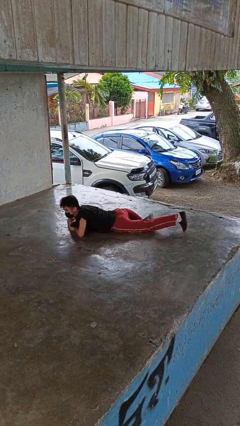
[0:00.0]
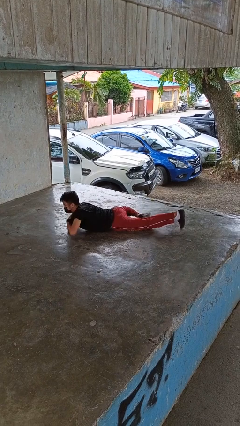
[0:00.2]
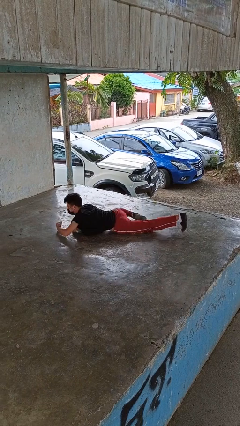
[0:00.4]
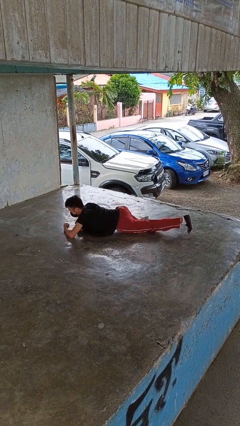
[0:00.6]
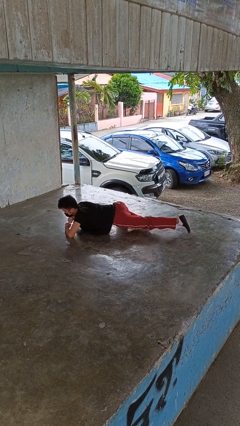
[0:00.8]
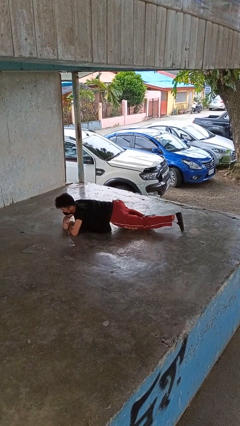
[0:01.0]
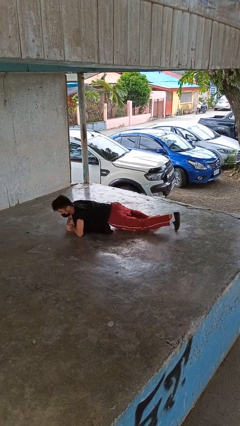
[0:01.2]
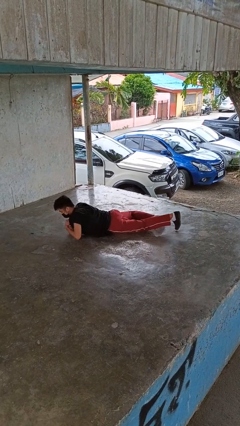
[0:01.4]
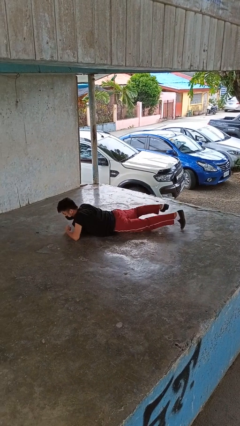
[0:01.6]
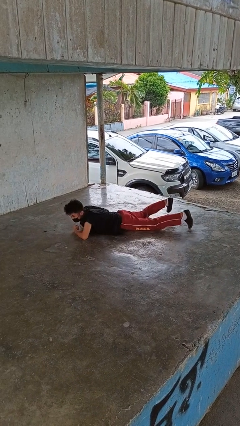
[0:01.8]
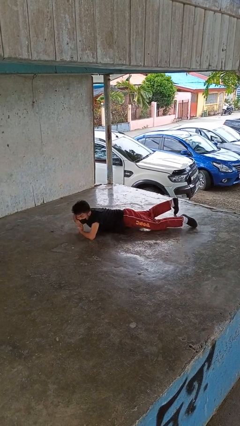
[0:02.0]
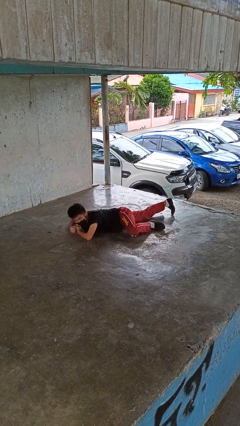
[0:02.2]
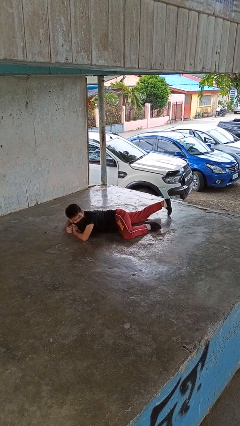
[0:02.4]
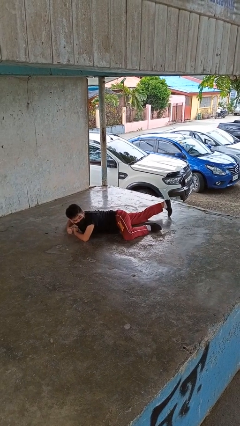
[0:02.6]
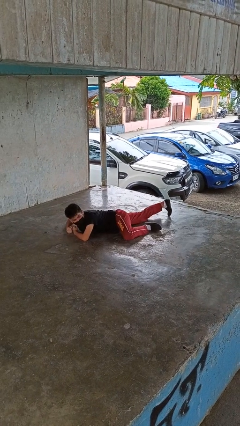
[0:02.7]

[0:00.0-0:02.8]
person crawls

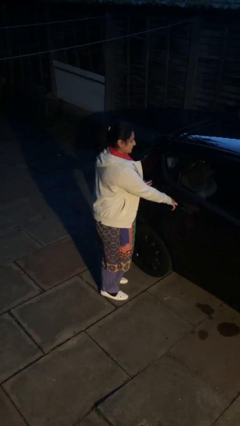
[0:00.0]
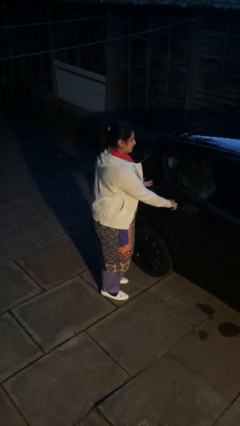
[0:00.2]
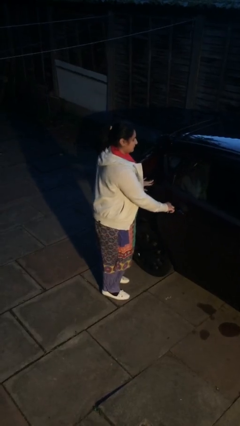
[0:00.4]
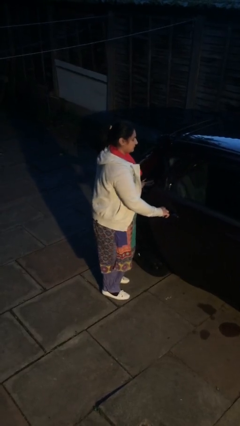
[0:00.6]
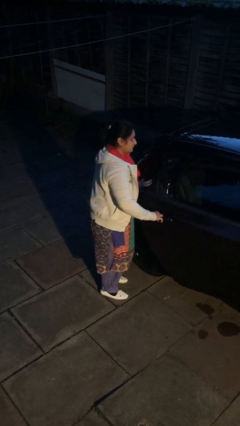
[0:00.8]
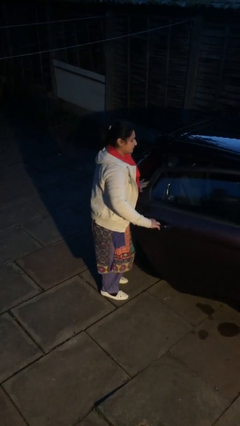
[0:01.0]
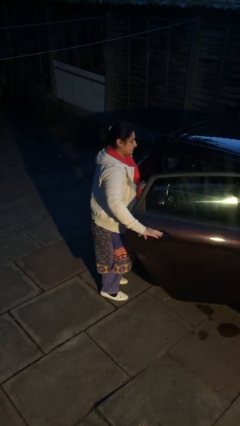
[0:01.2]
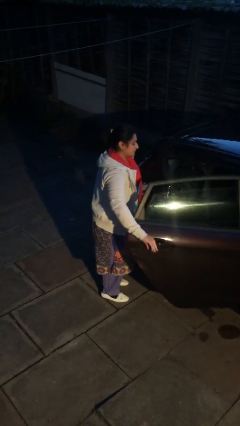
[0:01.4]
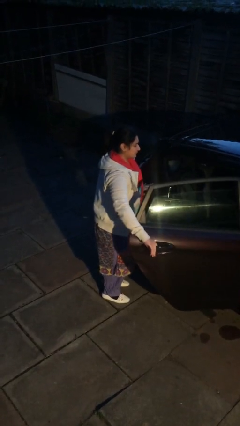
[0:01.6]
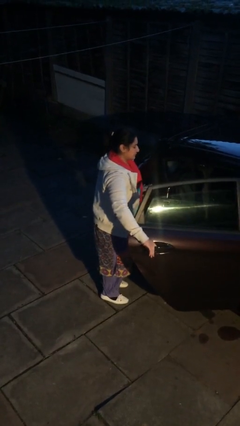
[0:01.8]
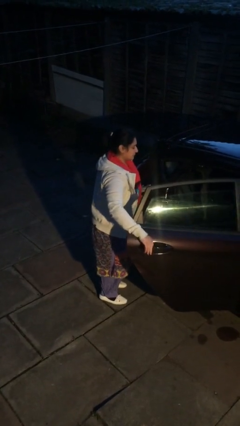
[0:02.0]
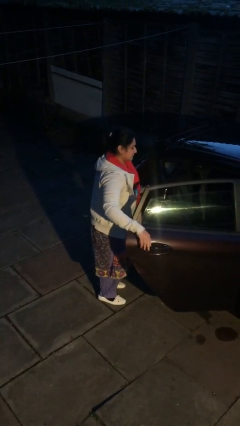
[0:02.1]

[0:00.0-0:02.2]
person opens car door

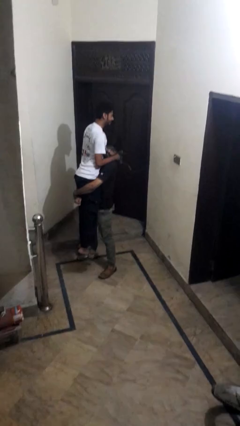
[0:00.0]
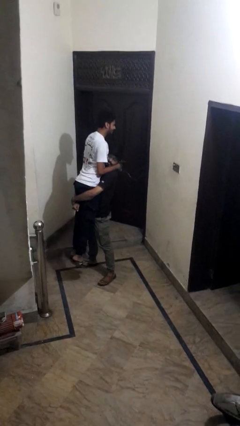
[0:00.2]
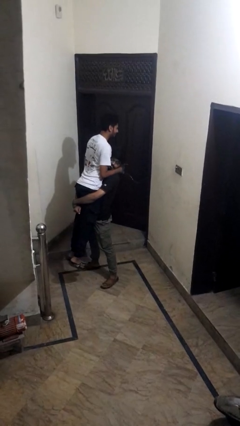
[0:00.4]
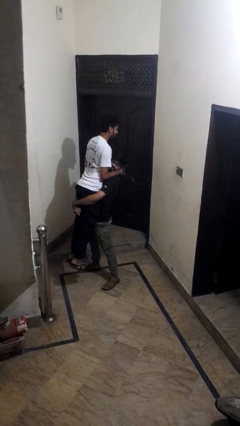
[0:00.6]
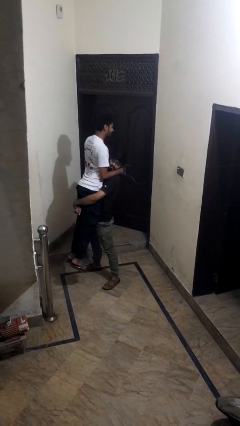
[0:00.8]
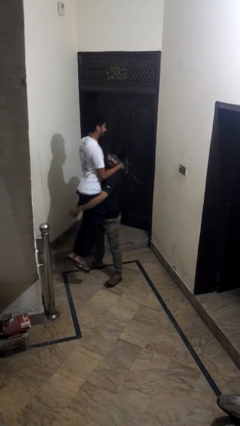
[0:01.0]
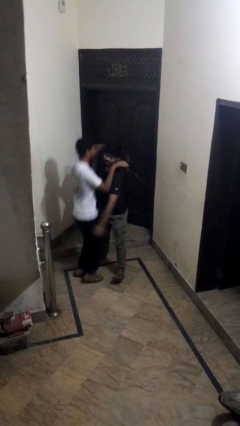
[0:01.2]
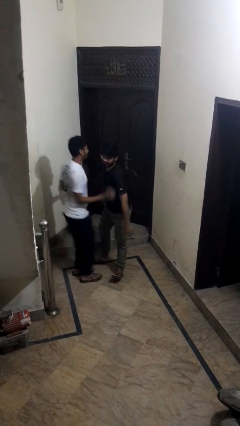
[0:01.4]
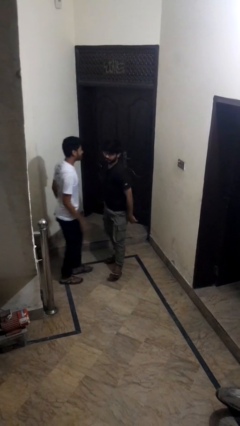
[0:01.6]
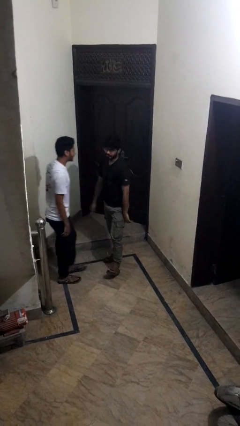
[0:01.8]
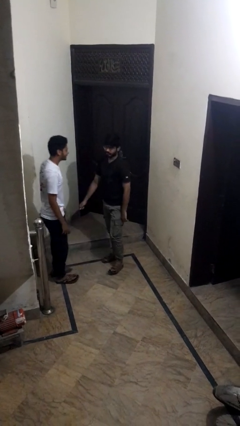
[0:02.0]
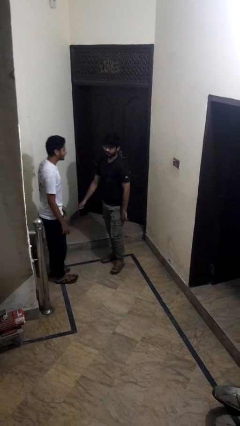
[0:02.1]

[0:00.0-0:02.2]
person takes off hat

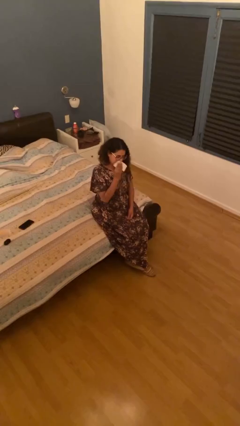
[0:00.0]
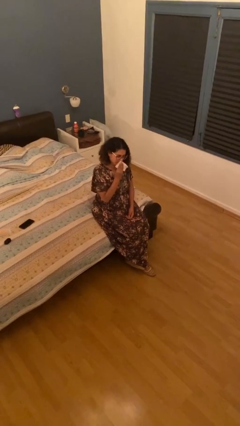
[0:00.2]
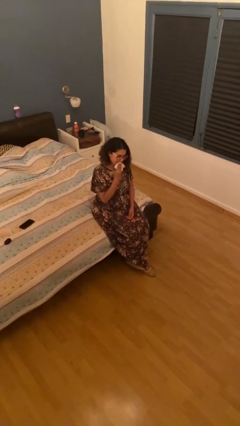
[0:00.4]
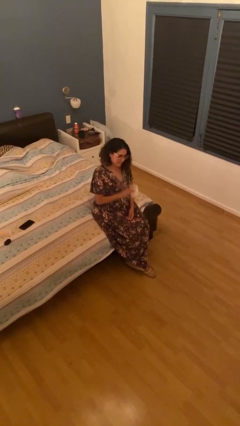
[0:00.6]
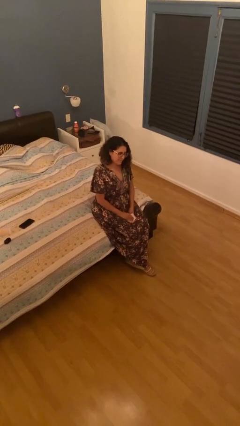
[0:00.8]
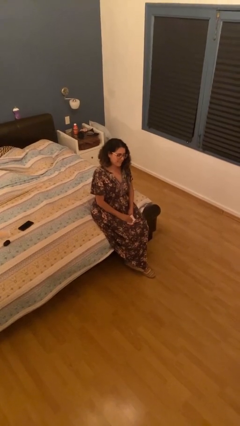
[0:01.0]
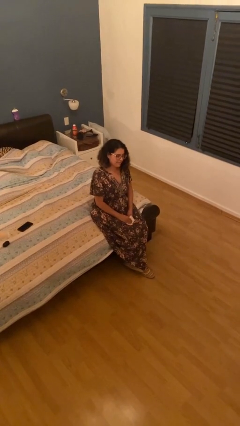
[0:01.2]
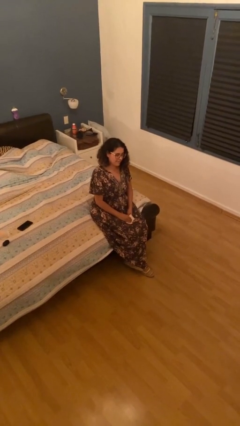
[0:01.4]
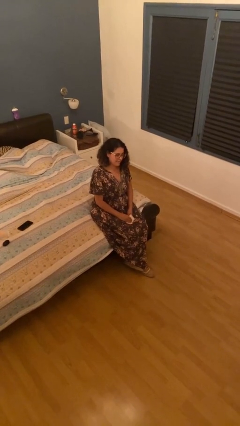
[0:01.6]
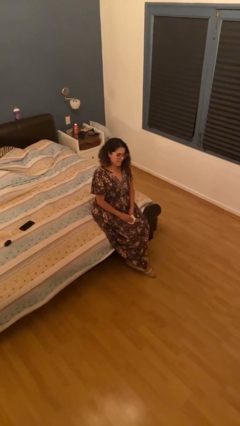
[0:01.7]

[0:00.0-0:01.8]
person wipes mouth with napkin

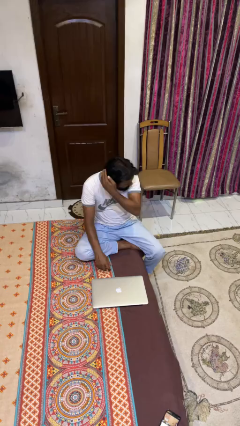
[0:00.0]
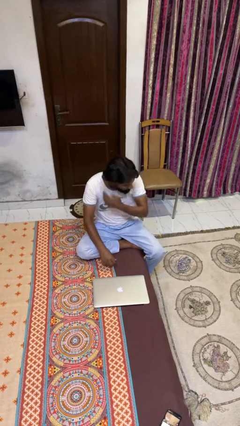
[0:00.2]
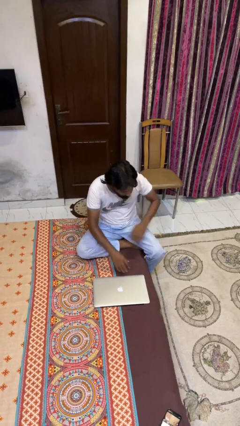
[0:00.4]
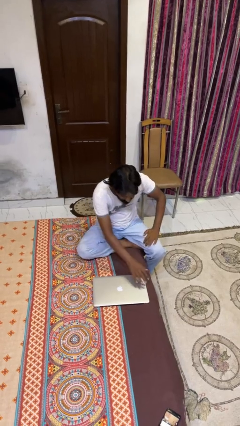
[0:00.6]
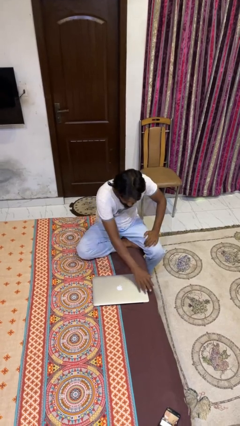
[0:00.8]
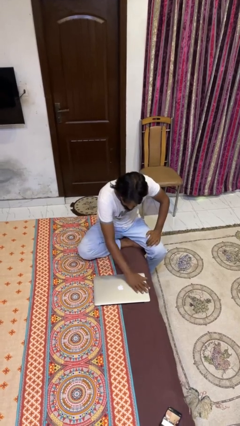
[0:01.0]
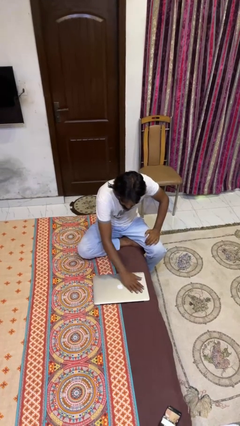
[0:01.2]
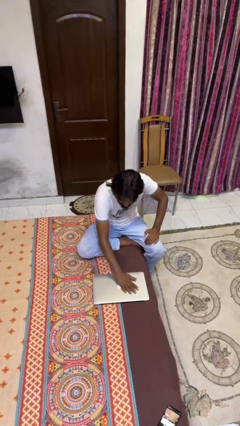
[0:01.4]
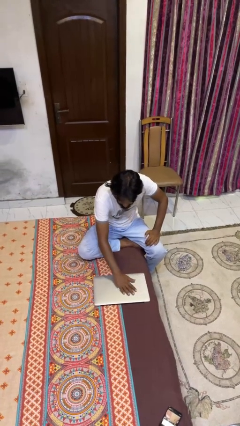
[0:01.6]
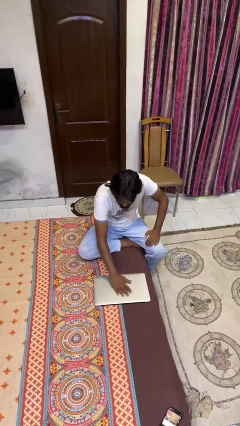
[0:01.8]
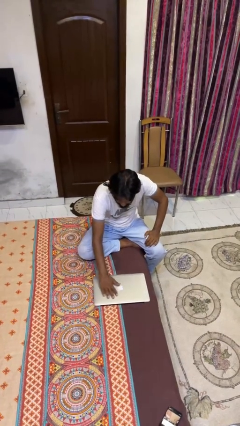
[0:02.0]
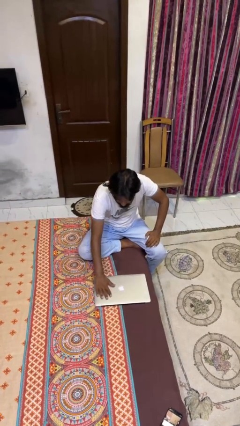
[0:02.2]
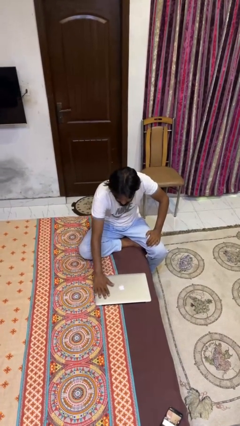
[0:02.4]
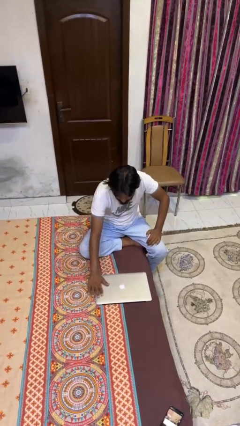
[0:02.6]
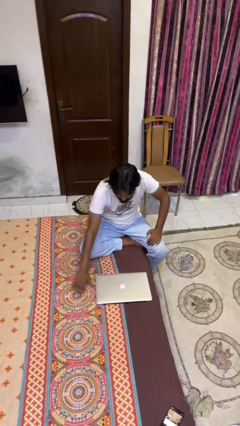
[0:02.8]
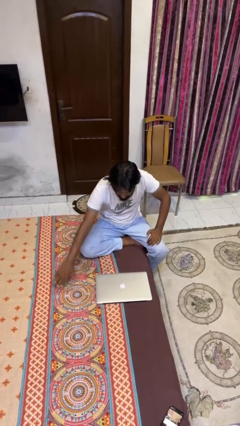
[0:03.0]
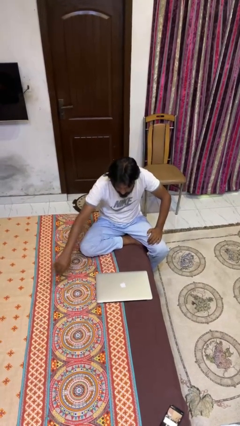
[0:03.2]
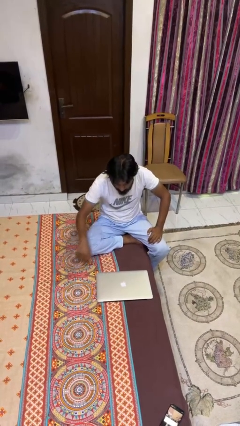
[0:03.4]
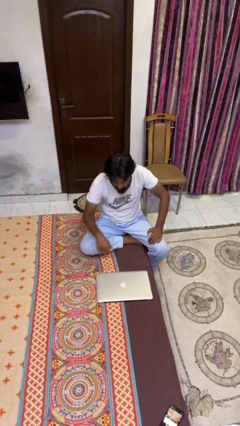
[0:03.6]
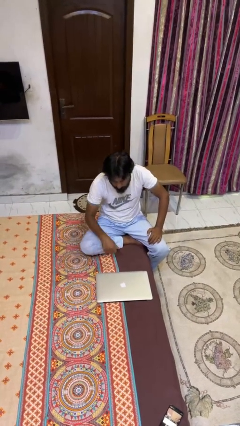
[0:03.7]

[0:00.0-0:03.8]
person waves hand over object

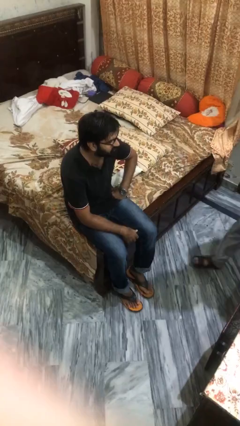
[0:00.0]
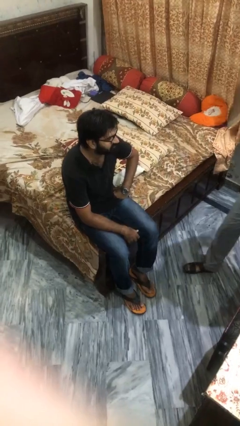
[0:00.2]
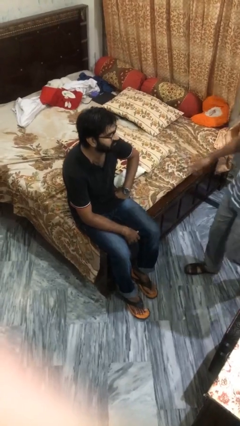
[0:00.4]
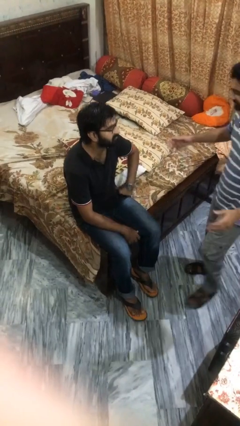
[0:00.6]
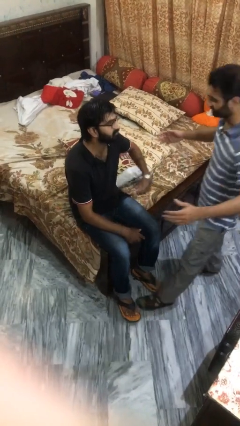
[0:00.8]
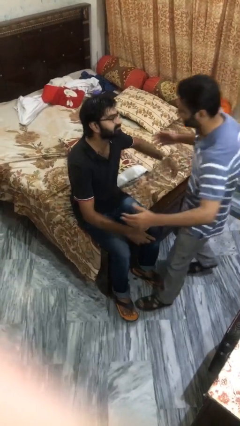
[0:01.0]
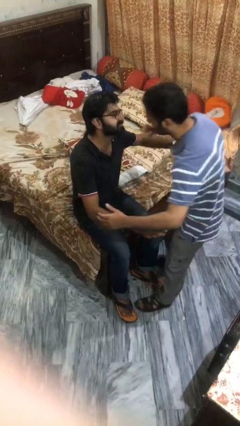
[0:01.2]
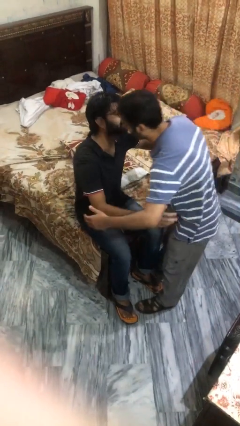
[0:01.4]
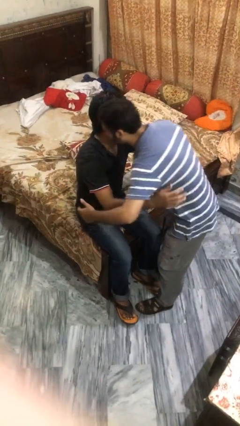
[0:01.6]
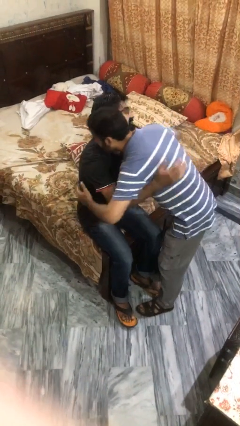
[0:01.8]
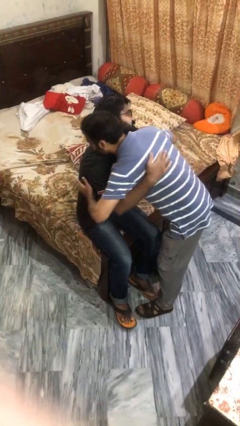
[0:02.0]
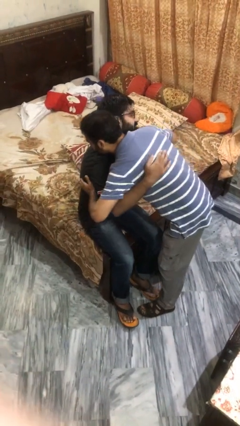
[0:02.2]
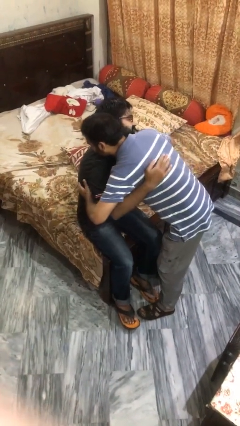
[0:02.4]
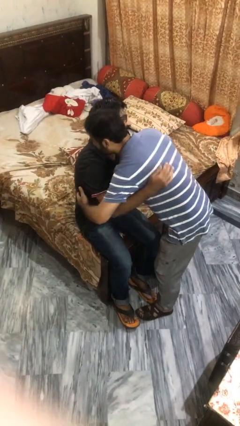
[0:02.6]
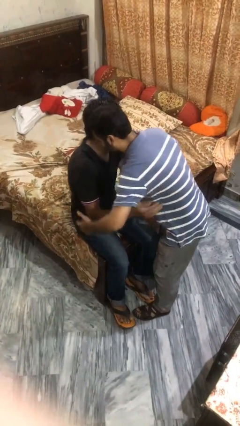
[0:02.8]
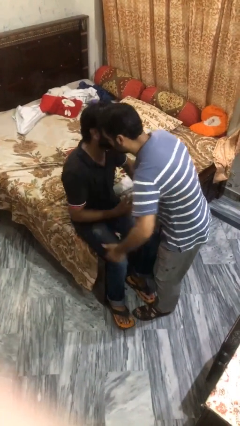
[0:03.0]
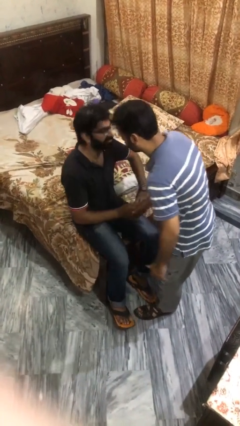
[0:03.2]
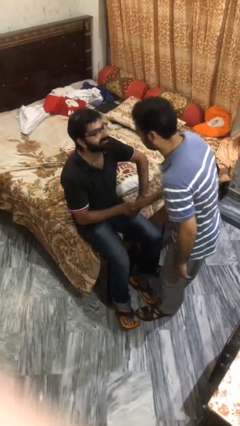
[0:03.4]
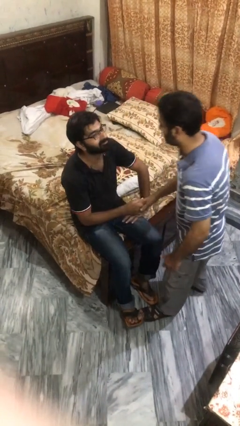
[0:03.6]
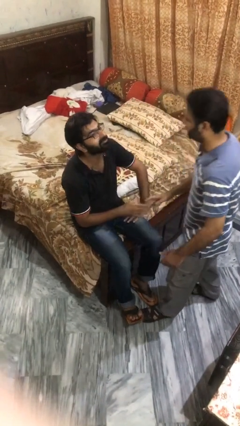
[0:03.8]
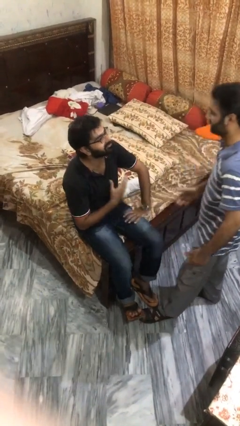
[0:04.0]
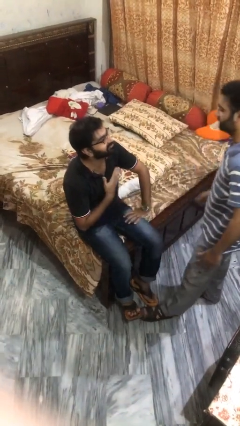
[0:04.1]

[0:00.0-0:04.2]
person embraces person
